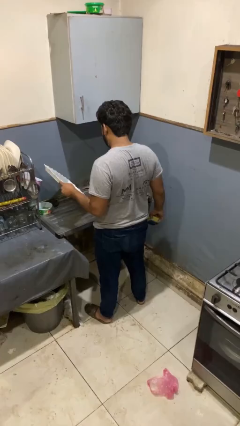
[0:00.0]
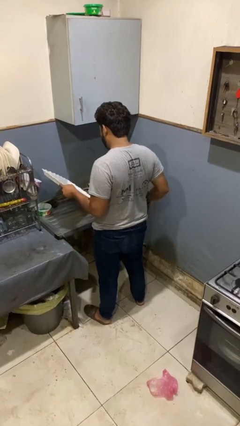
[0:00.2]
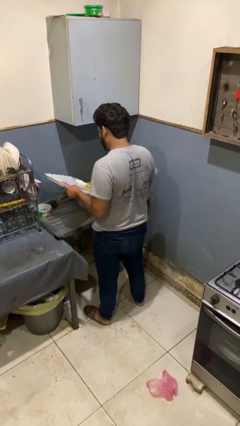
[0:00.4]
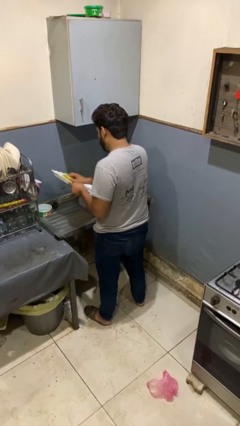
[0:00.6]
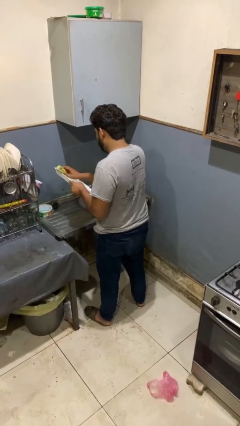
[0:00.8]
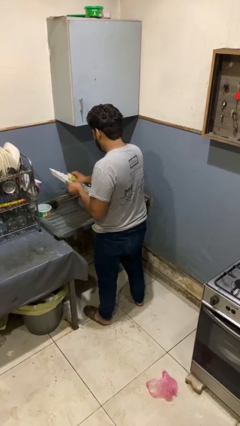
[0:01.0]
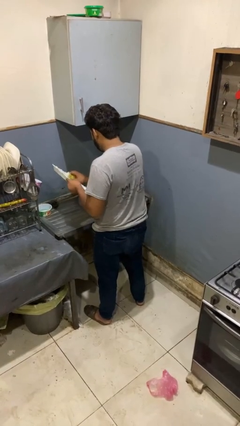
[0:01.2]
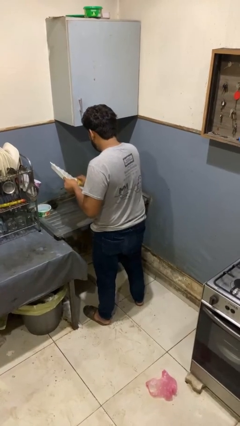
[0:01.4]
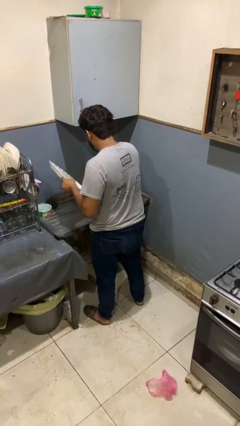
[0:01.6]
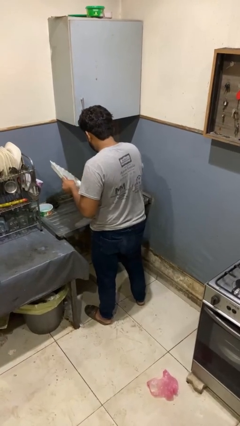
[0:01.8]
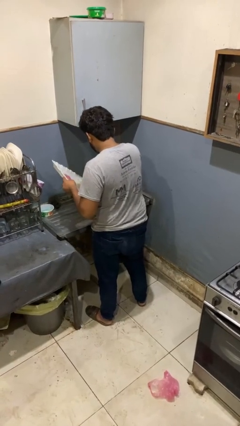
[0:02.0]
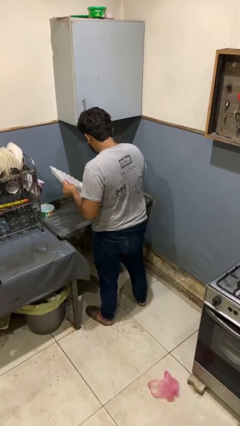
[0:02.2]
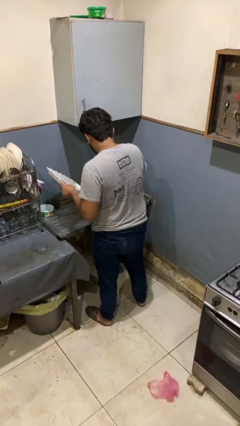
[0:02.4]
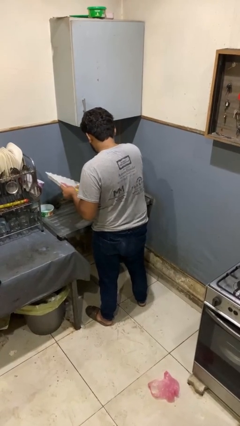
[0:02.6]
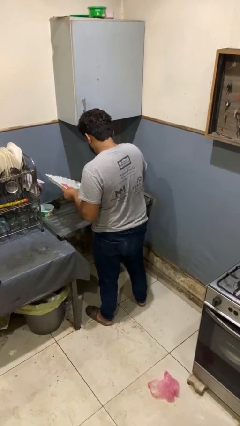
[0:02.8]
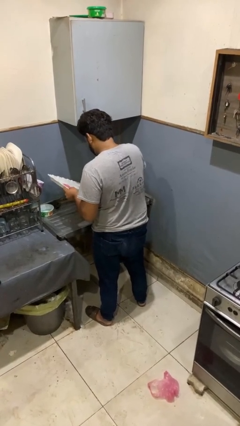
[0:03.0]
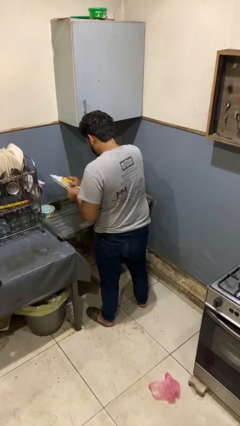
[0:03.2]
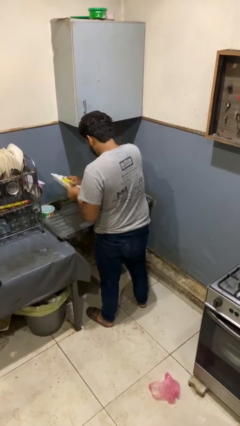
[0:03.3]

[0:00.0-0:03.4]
person washes dish

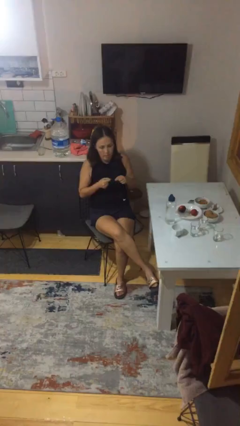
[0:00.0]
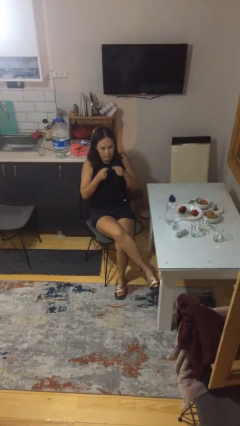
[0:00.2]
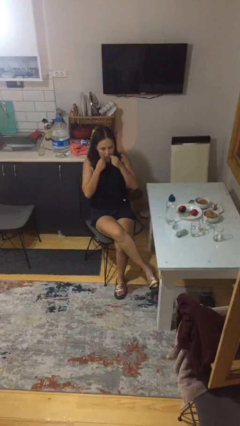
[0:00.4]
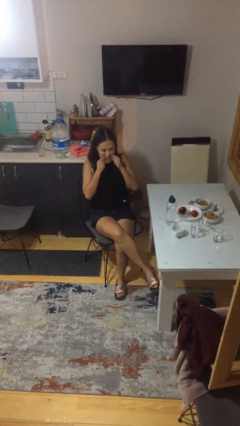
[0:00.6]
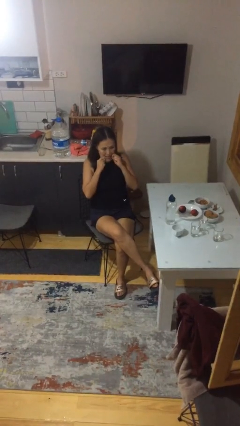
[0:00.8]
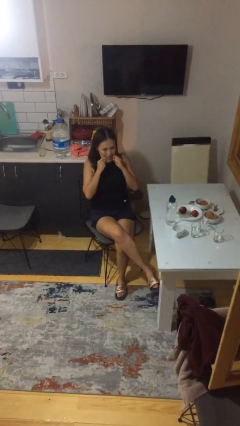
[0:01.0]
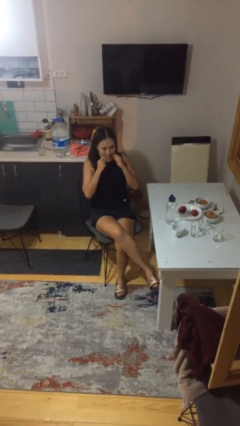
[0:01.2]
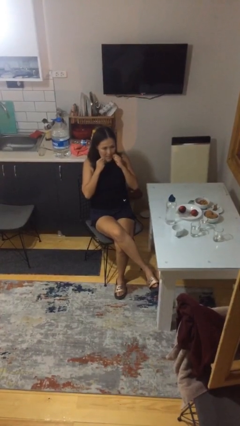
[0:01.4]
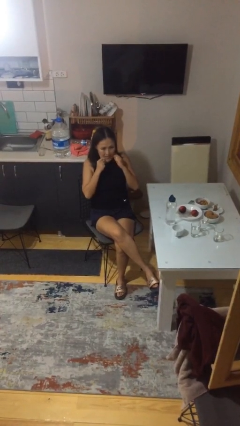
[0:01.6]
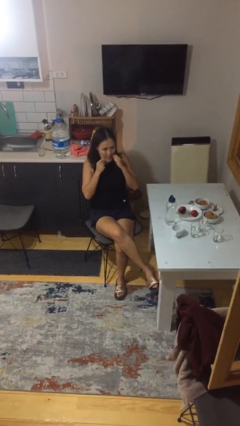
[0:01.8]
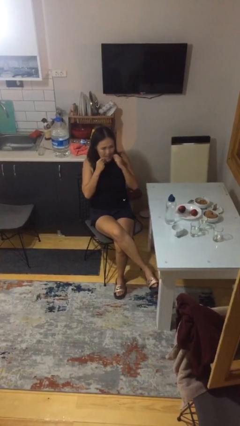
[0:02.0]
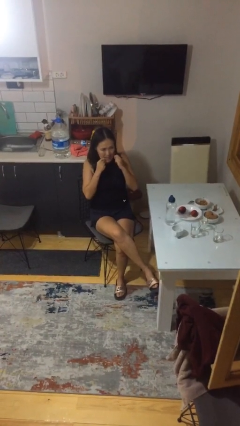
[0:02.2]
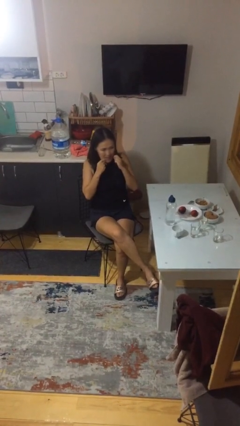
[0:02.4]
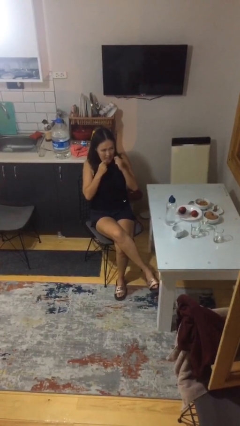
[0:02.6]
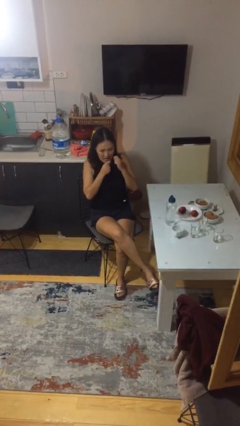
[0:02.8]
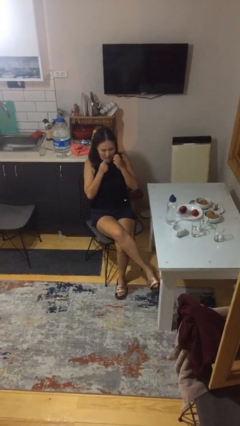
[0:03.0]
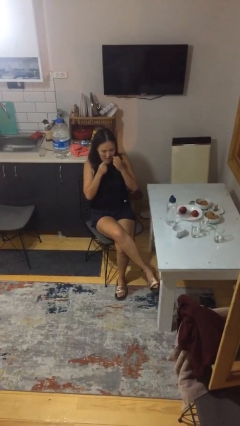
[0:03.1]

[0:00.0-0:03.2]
person flosses

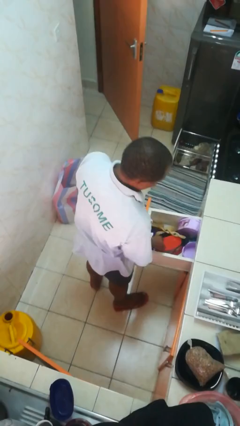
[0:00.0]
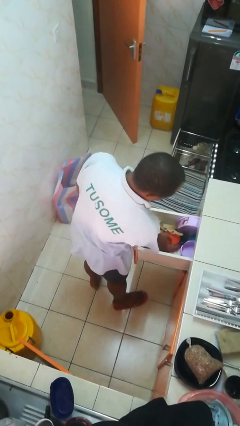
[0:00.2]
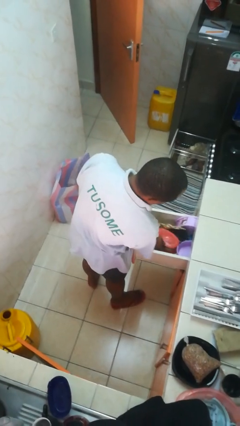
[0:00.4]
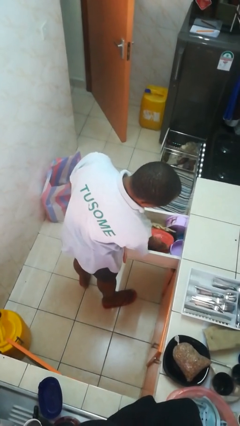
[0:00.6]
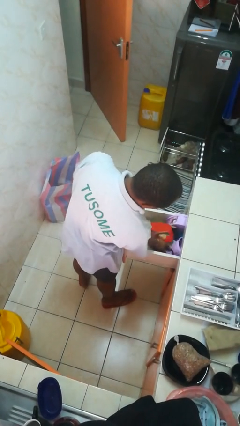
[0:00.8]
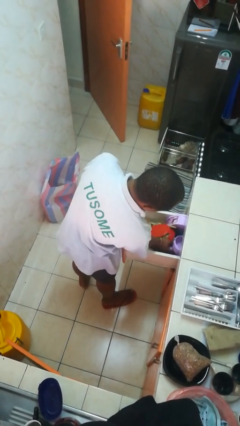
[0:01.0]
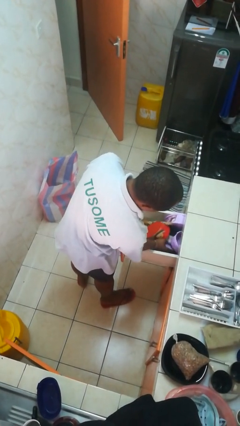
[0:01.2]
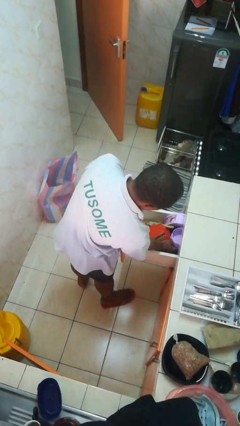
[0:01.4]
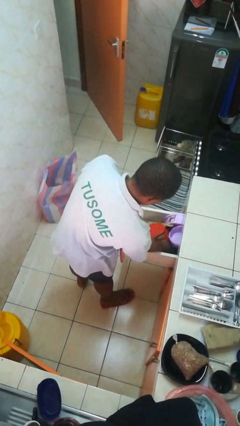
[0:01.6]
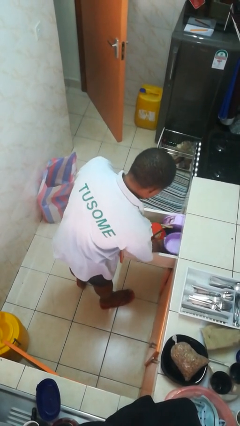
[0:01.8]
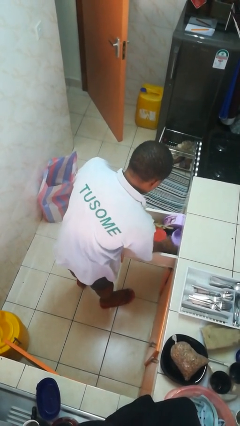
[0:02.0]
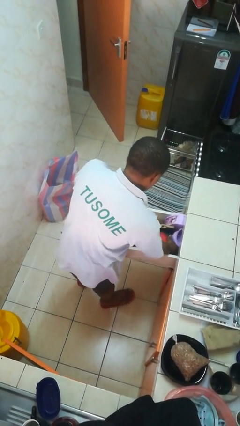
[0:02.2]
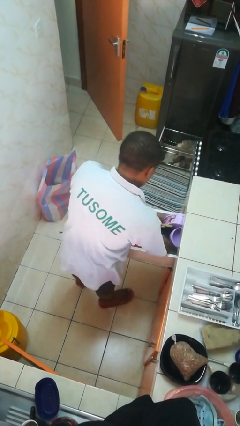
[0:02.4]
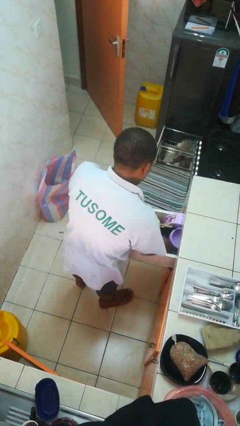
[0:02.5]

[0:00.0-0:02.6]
person searches in kitchen drawer

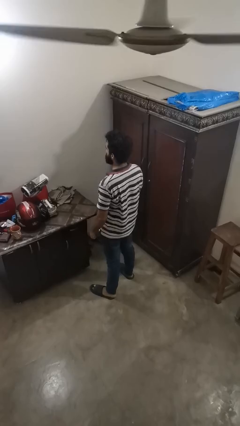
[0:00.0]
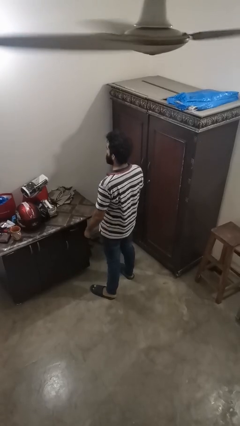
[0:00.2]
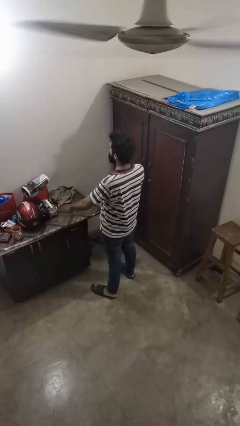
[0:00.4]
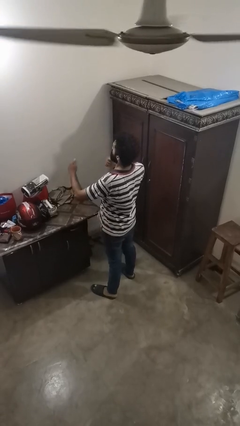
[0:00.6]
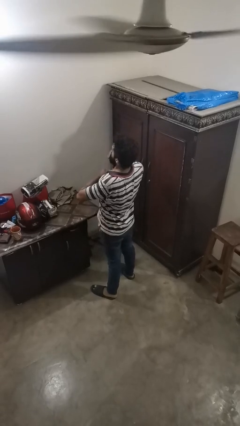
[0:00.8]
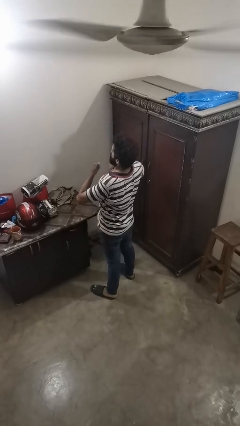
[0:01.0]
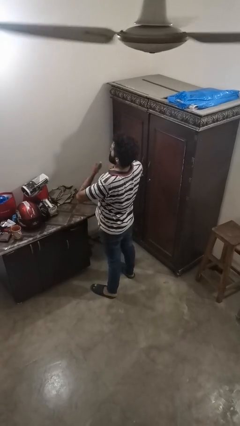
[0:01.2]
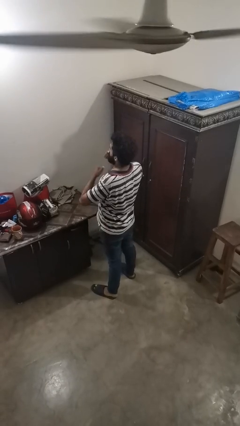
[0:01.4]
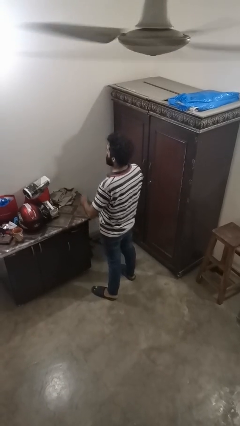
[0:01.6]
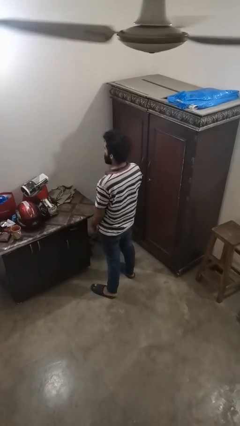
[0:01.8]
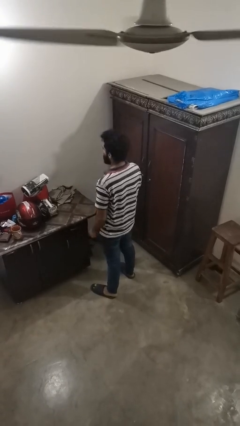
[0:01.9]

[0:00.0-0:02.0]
person drums on chest

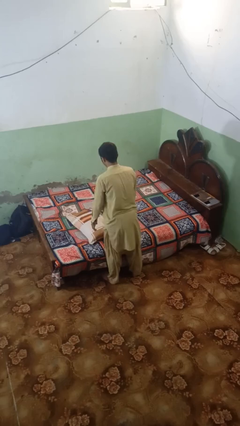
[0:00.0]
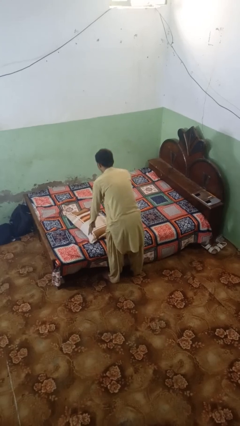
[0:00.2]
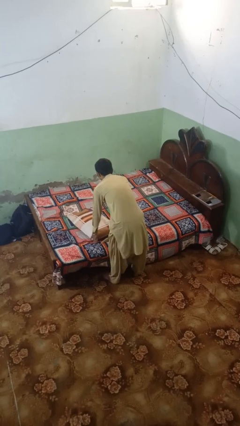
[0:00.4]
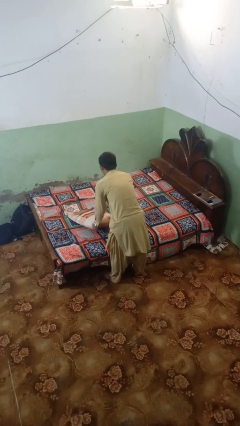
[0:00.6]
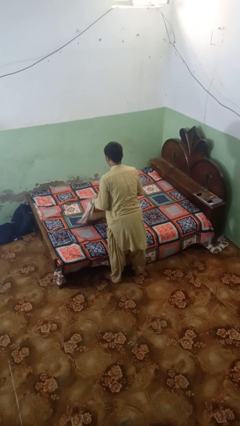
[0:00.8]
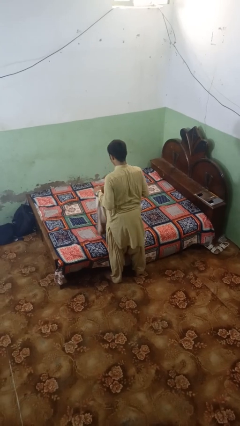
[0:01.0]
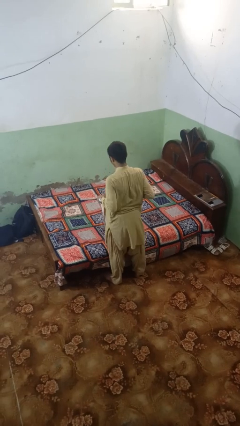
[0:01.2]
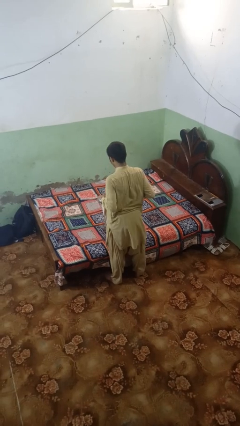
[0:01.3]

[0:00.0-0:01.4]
person picks up object from bed

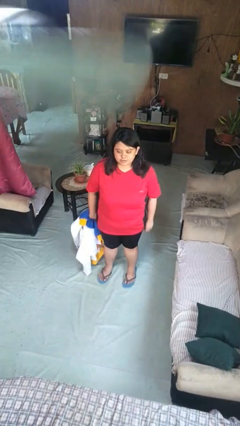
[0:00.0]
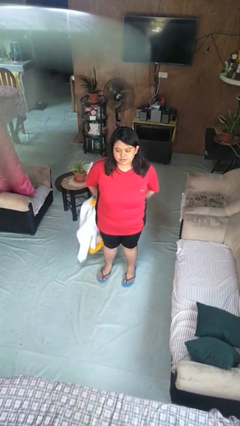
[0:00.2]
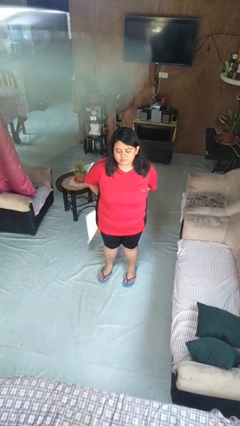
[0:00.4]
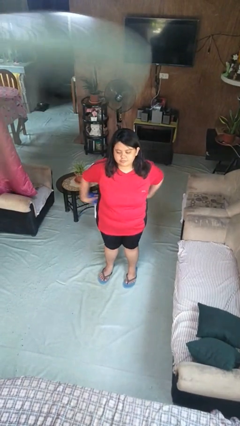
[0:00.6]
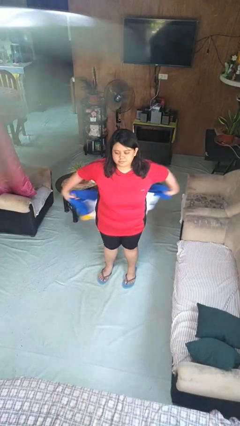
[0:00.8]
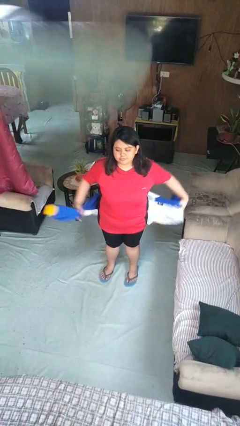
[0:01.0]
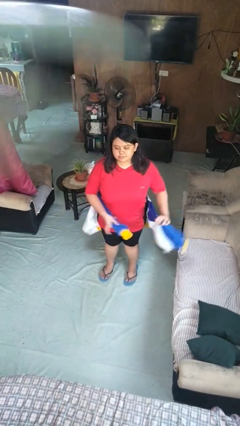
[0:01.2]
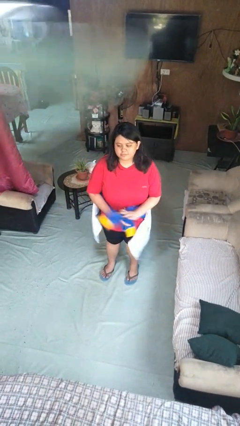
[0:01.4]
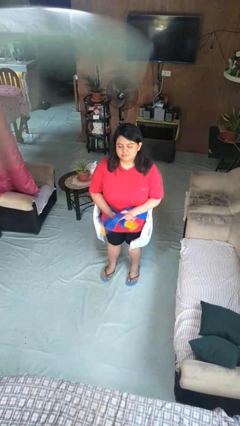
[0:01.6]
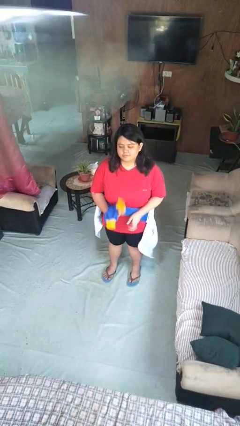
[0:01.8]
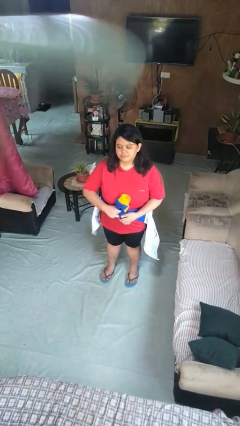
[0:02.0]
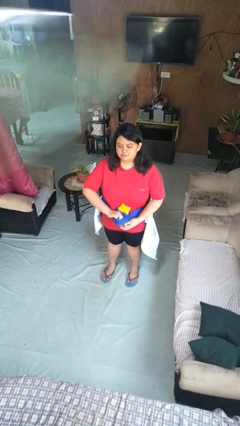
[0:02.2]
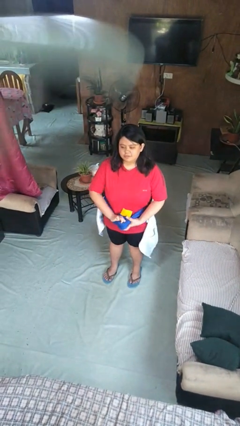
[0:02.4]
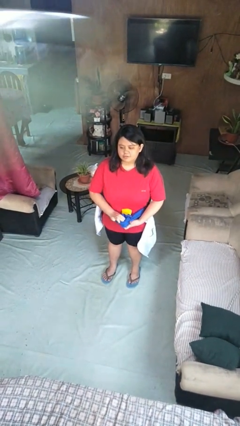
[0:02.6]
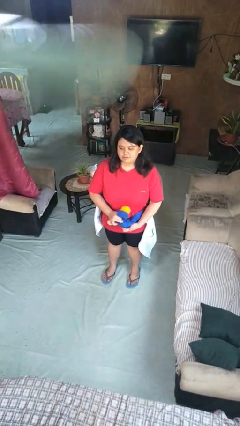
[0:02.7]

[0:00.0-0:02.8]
person ties jacket around waist

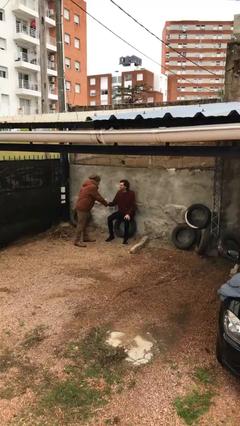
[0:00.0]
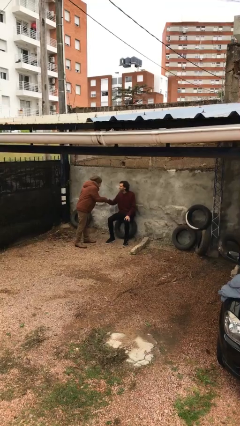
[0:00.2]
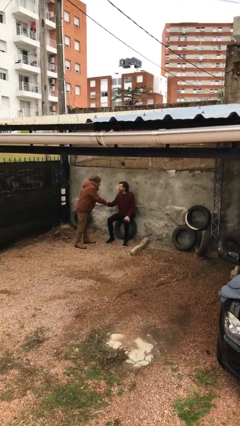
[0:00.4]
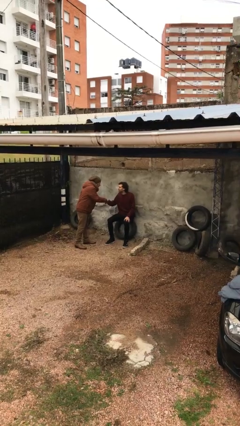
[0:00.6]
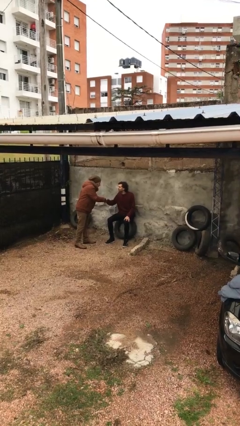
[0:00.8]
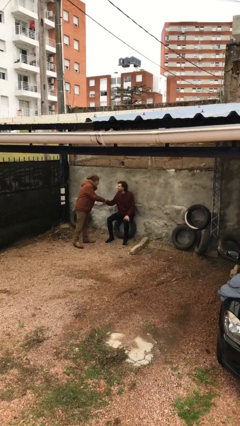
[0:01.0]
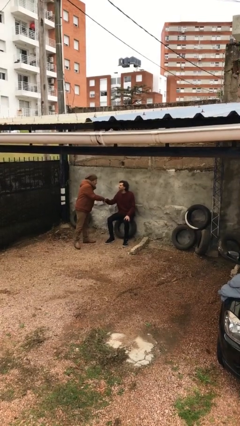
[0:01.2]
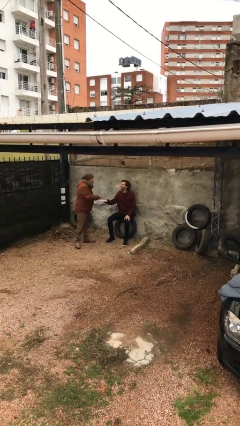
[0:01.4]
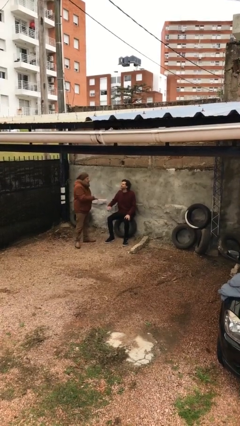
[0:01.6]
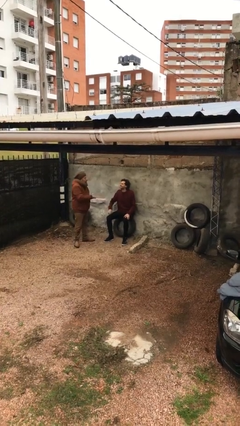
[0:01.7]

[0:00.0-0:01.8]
person shakes hand
